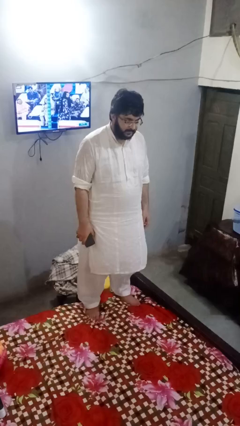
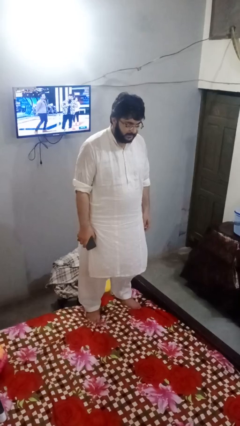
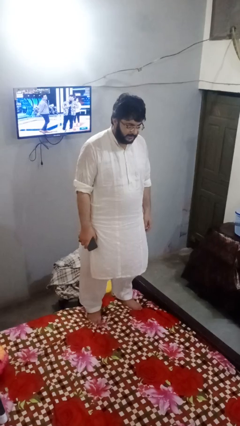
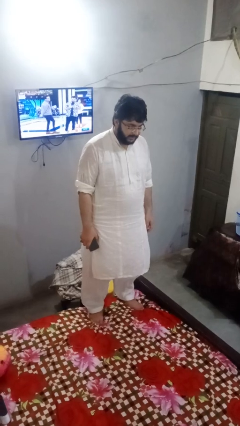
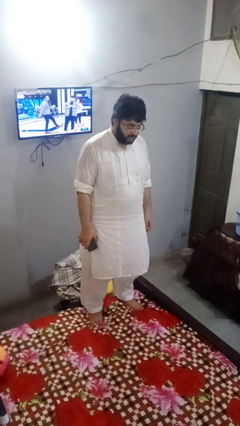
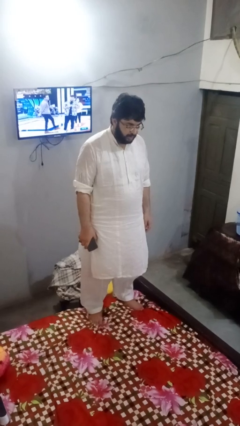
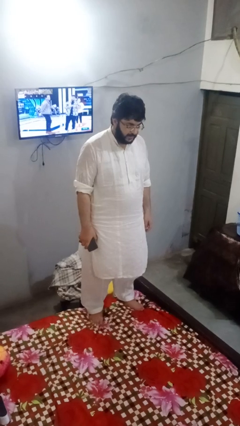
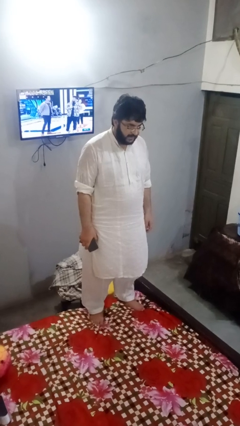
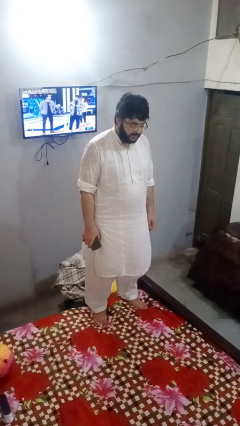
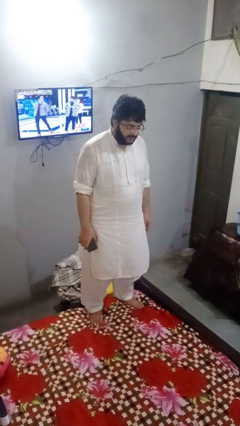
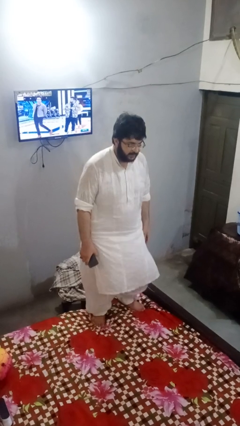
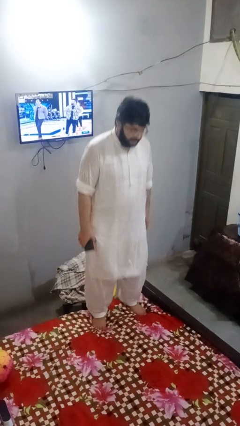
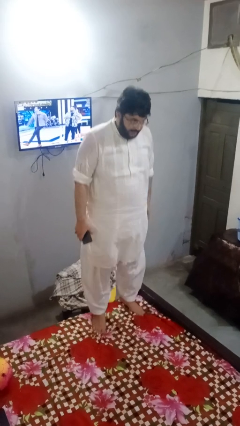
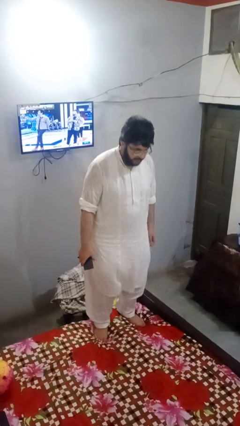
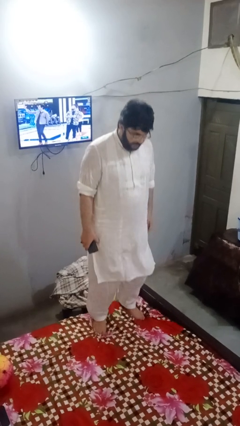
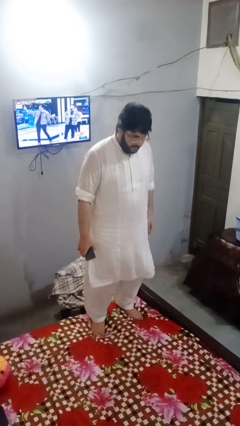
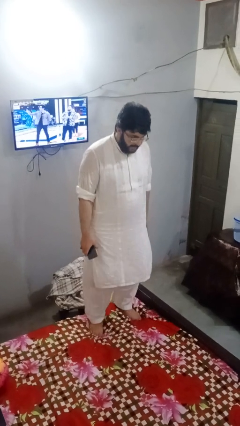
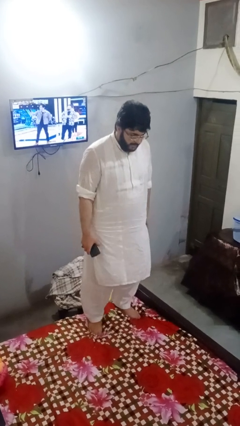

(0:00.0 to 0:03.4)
person jumps on bed

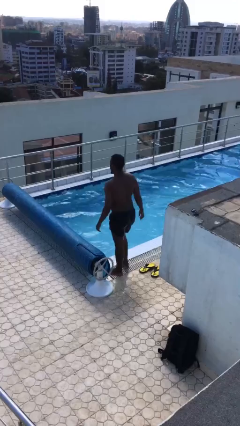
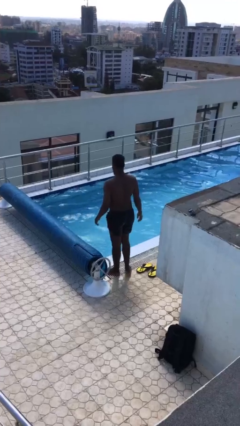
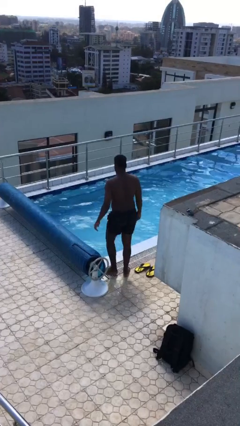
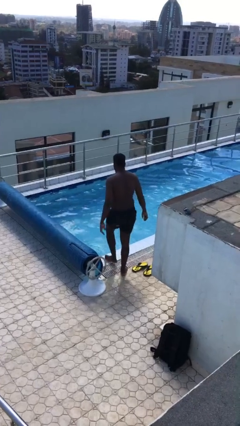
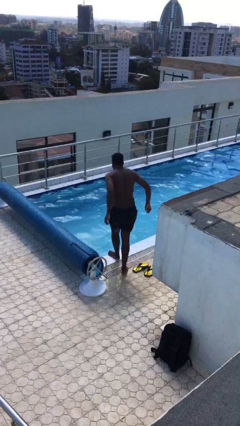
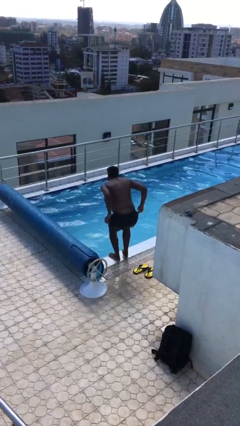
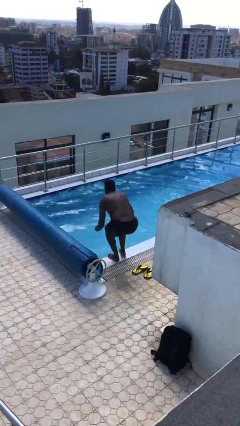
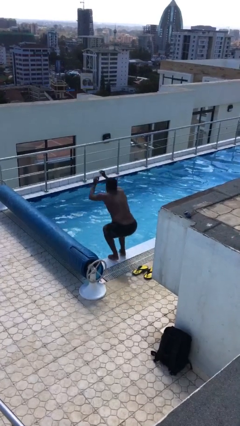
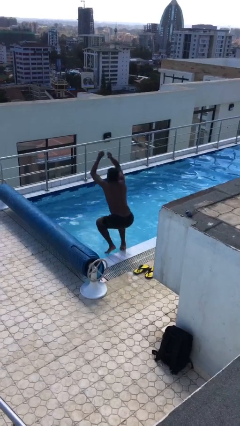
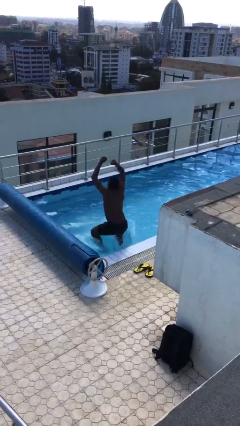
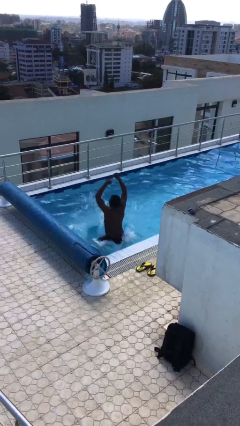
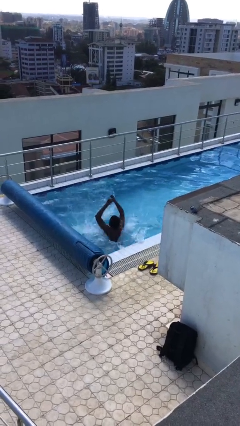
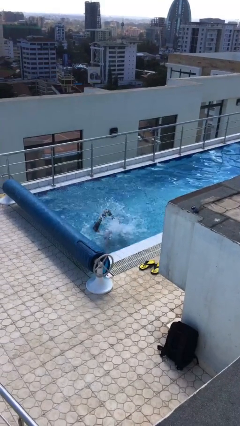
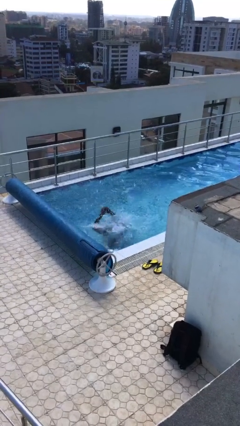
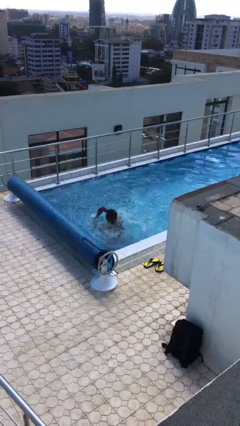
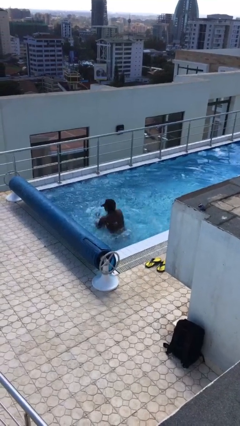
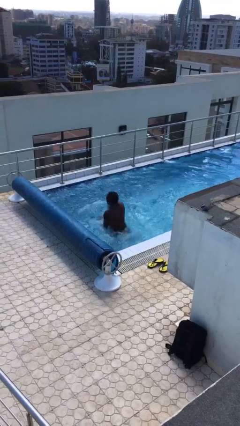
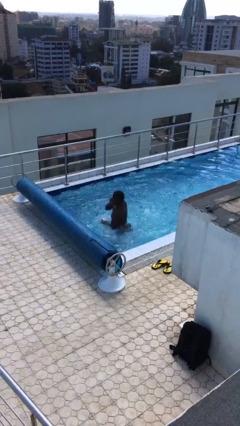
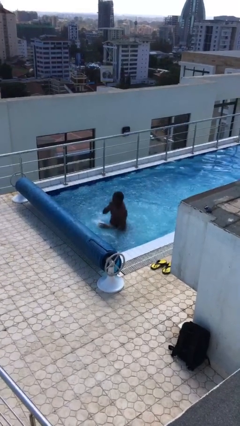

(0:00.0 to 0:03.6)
person jumps into pool

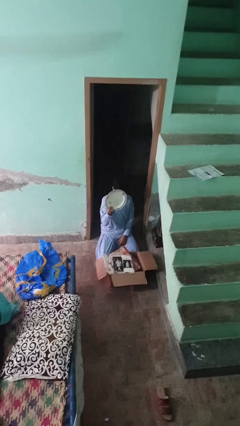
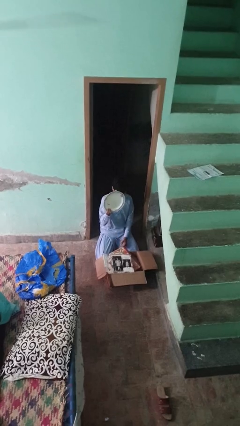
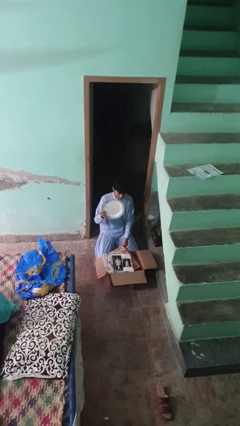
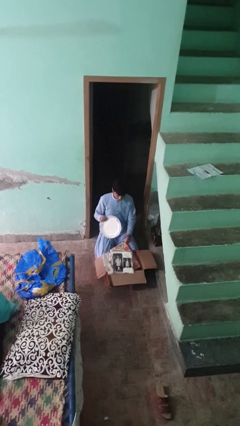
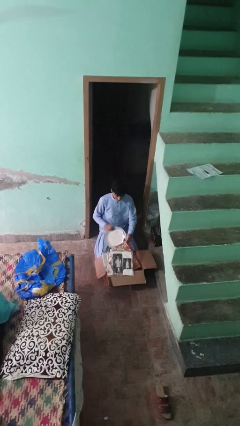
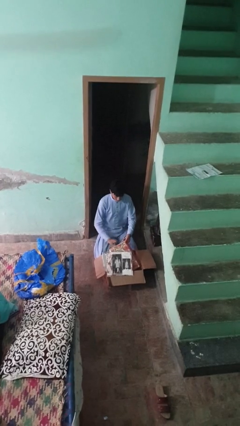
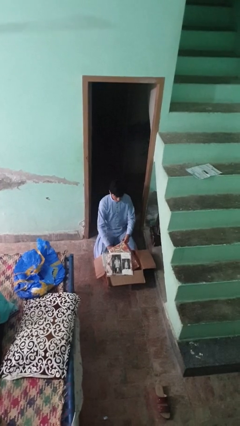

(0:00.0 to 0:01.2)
person puts object into box

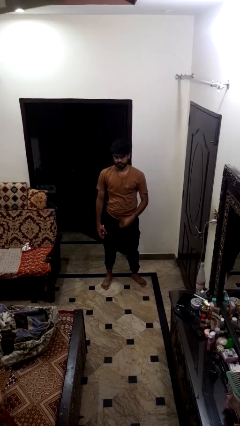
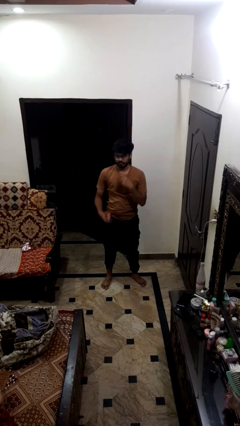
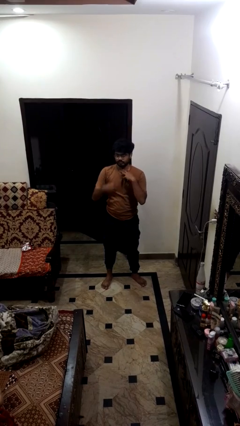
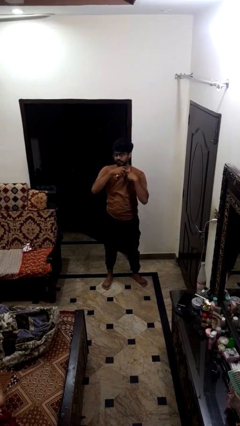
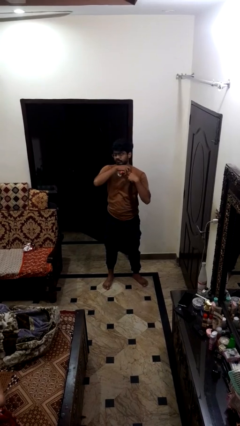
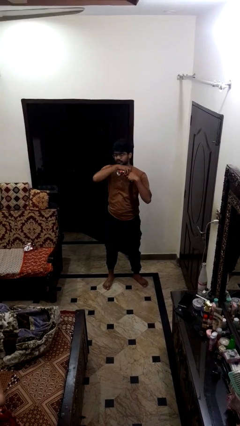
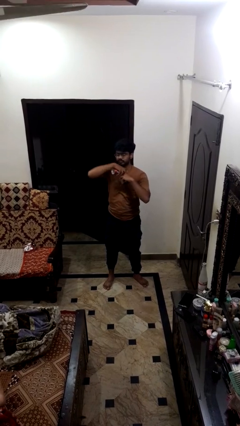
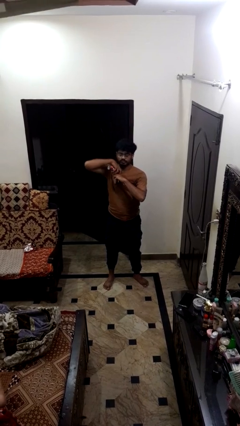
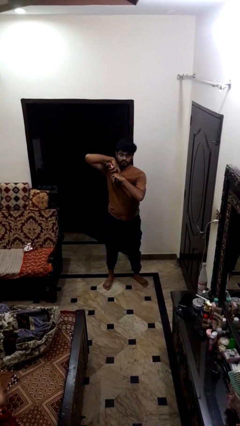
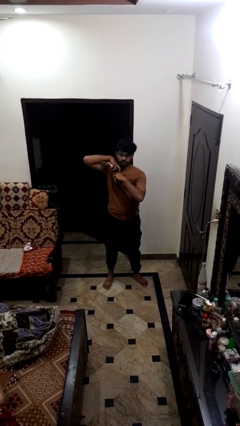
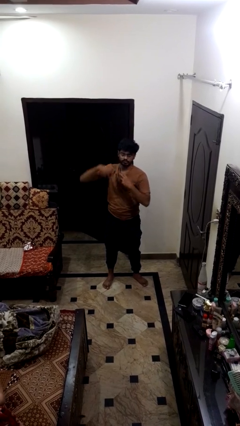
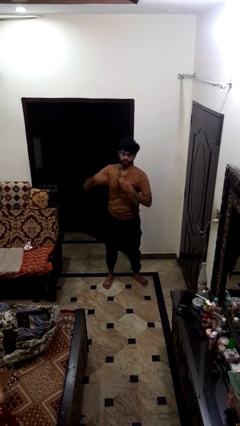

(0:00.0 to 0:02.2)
person applies deodorant

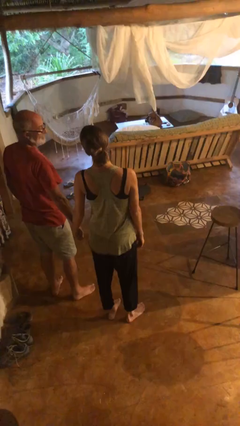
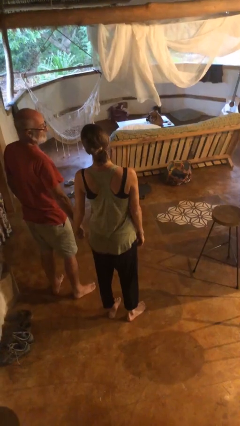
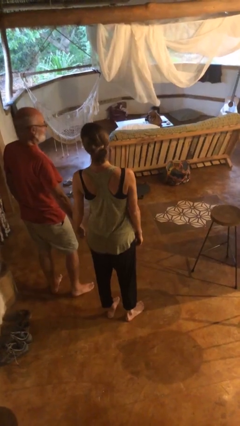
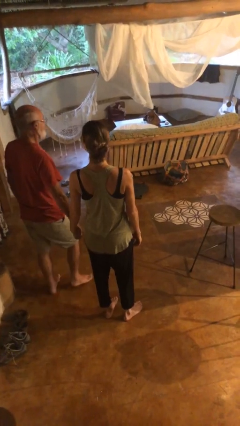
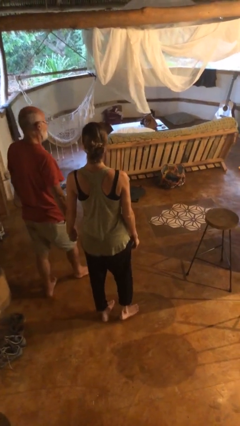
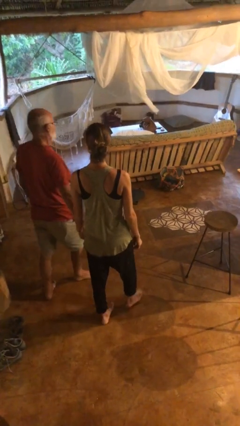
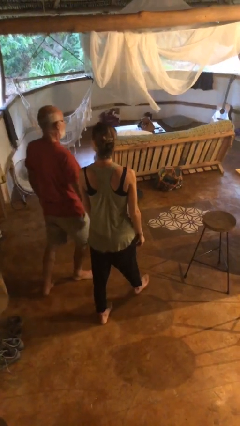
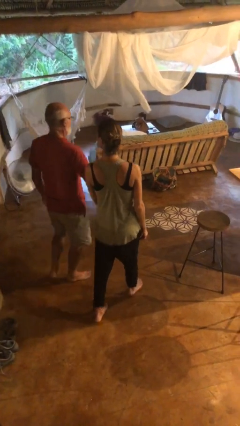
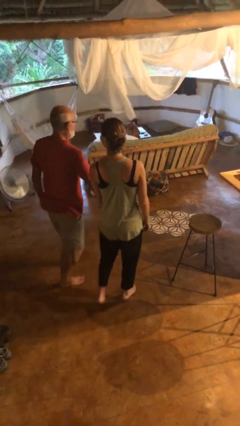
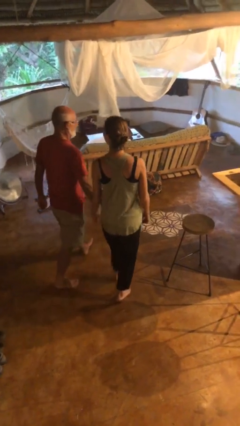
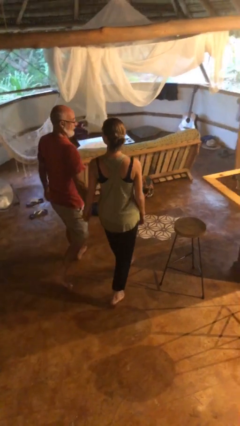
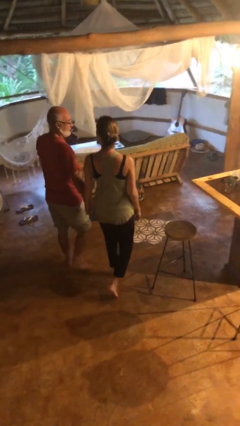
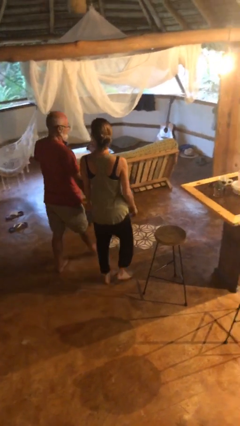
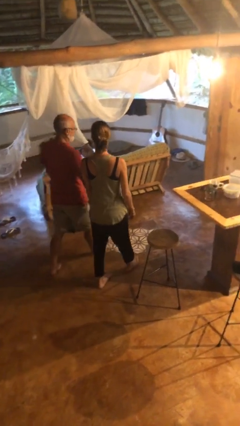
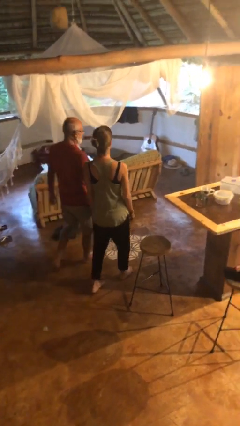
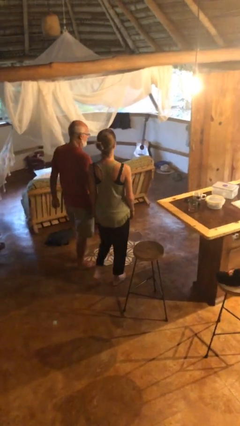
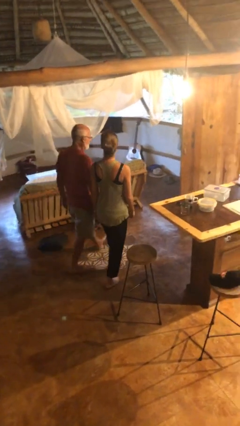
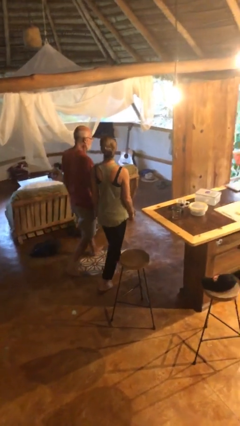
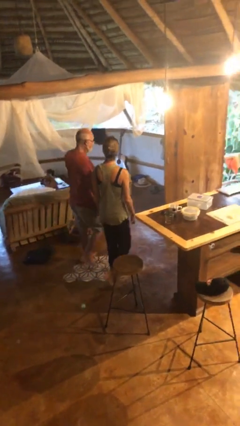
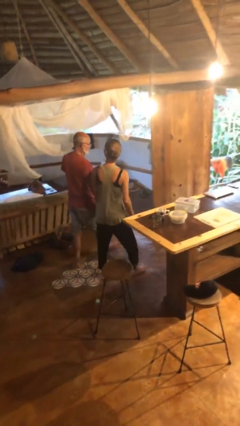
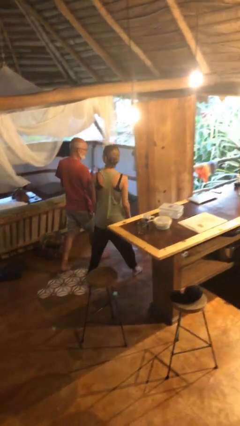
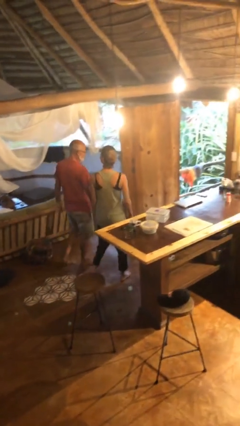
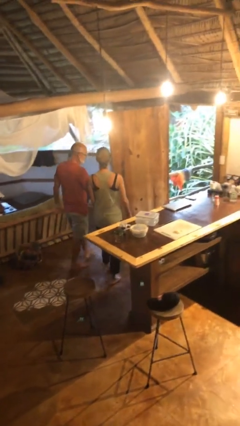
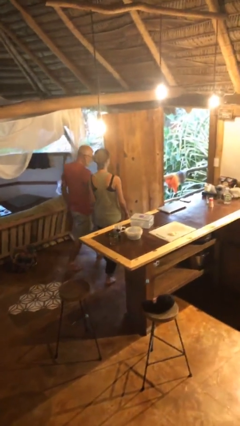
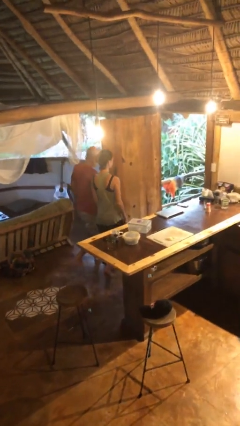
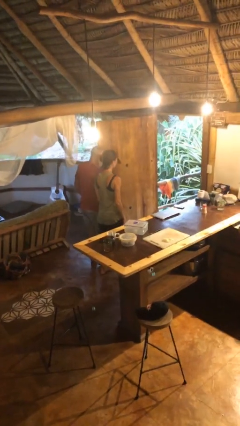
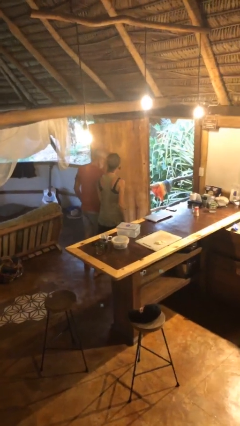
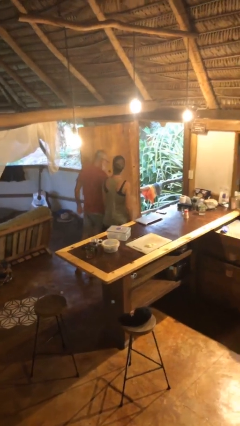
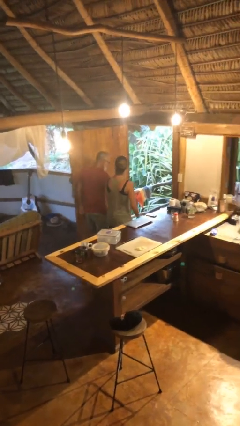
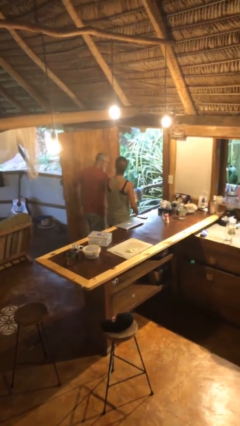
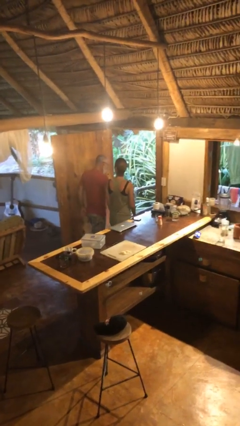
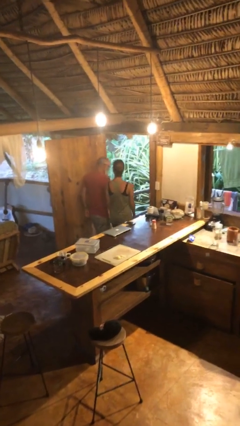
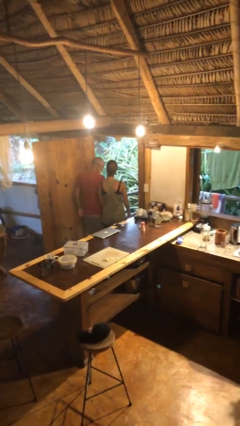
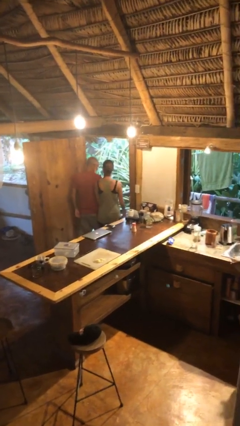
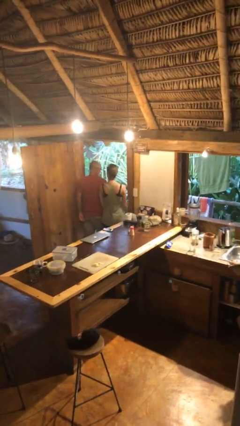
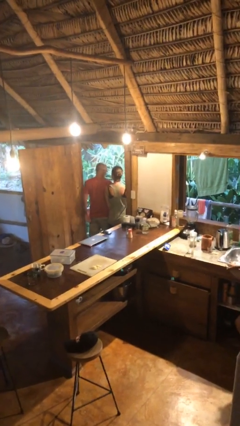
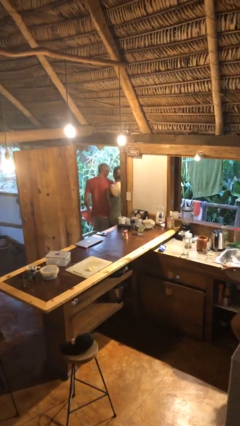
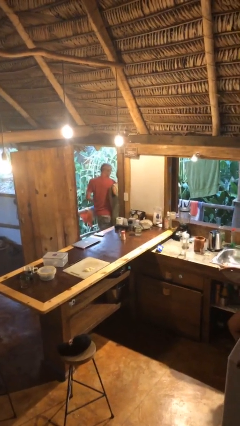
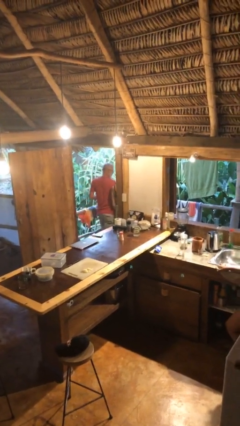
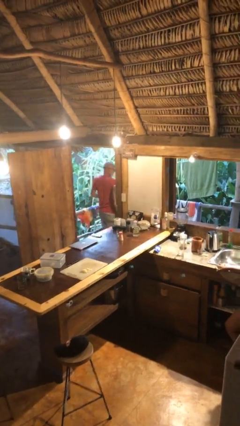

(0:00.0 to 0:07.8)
person holds hand
